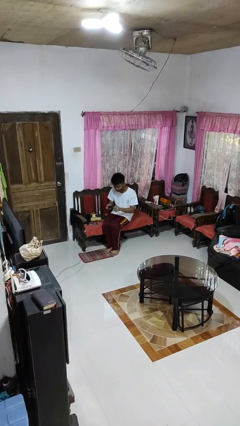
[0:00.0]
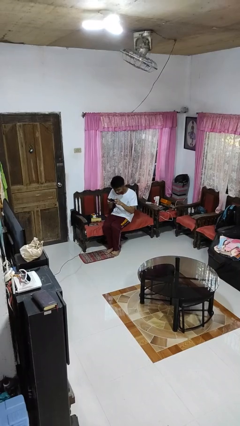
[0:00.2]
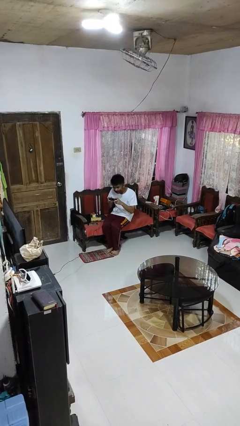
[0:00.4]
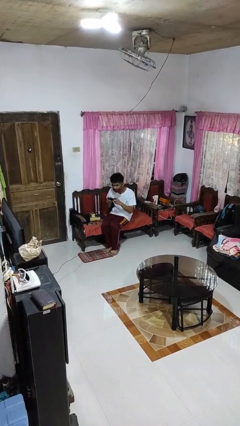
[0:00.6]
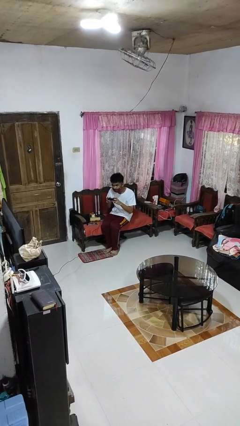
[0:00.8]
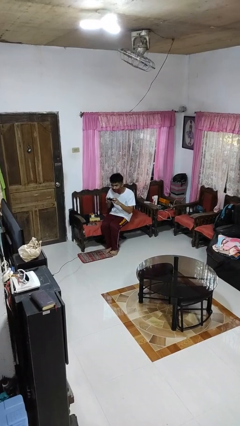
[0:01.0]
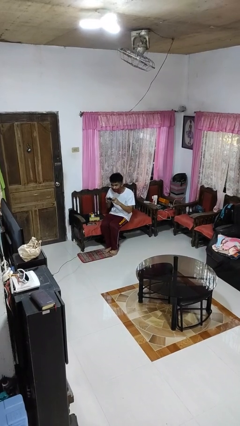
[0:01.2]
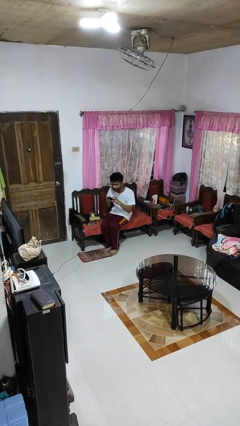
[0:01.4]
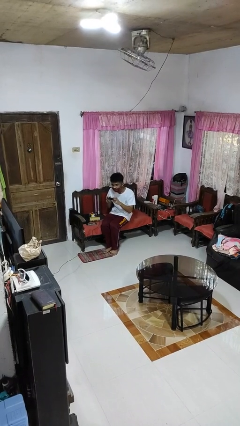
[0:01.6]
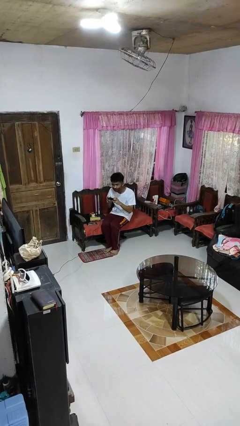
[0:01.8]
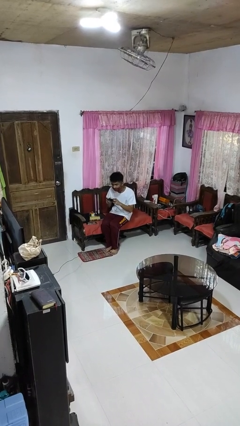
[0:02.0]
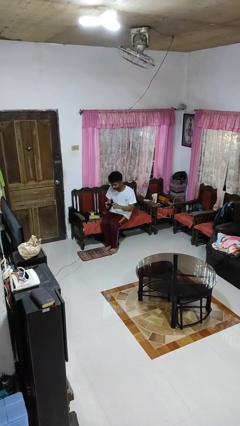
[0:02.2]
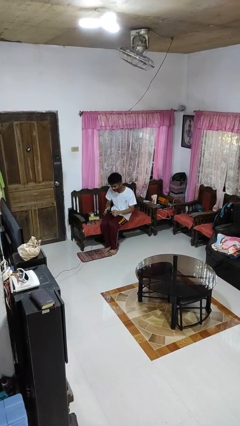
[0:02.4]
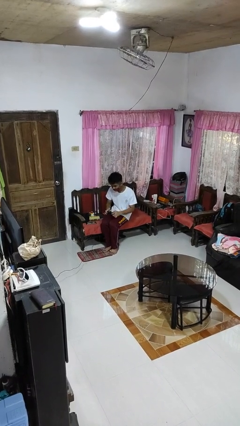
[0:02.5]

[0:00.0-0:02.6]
person interacts with handheld game

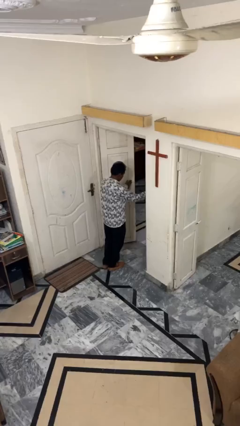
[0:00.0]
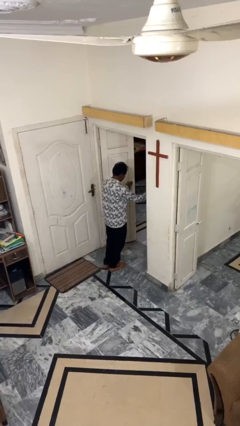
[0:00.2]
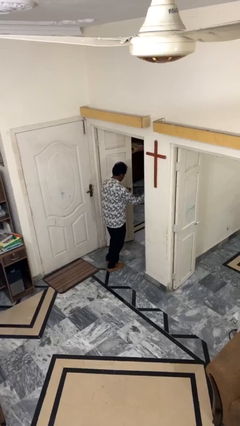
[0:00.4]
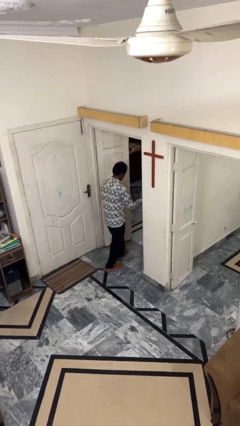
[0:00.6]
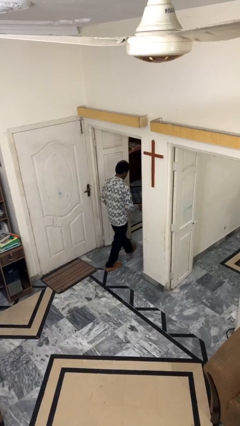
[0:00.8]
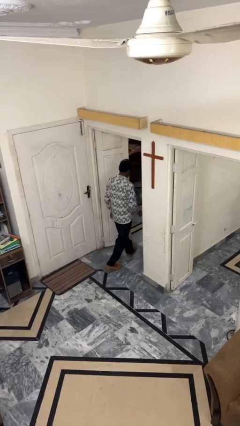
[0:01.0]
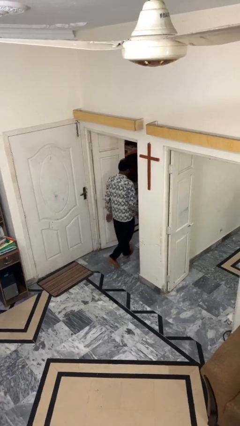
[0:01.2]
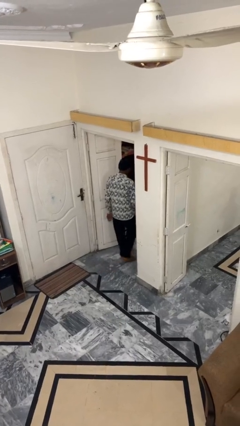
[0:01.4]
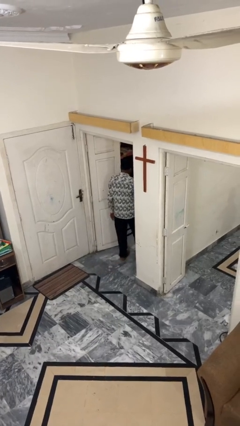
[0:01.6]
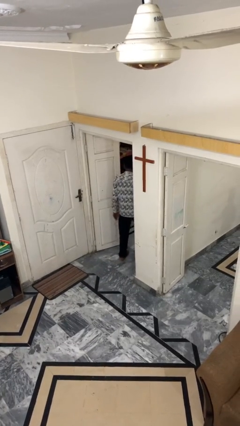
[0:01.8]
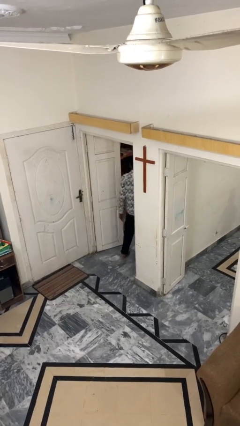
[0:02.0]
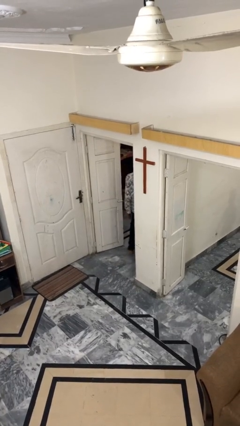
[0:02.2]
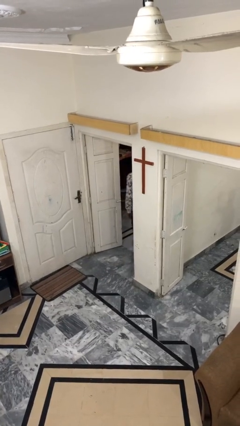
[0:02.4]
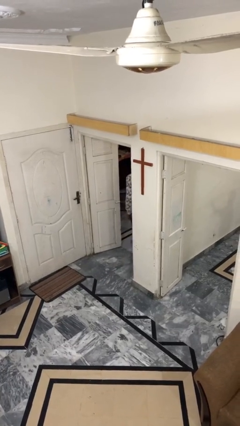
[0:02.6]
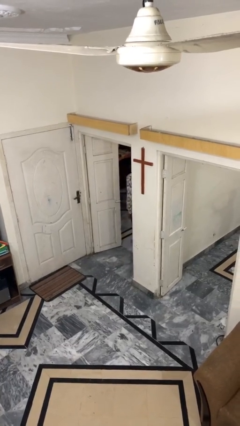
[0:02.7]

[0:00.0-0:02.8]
person exits scene through structure

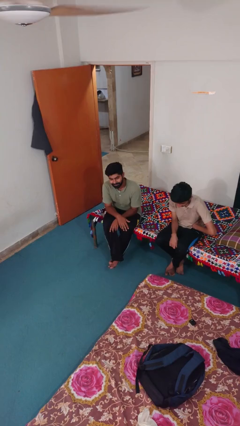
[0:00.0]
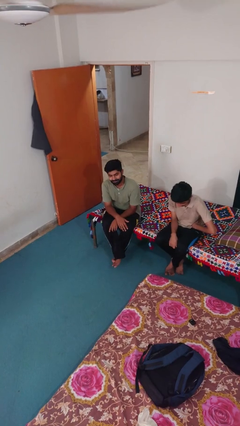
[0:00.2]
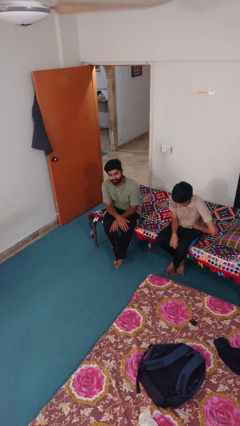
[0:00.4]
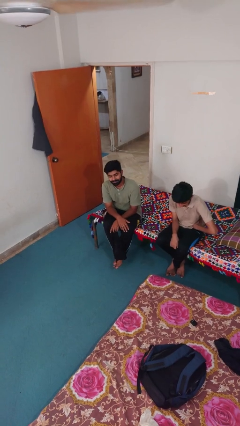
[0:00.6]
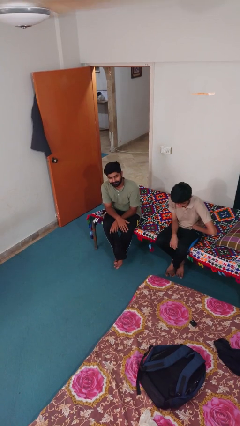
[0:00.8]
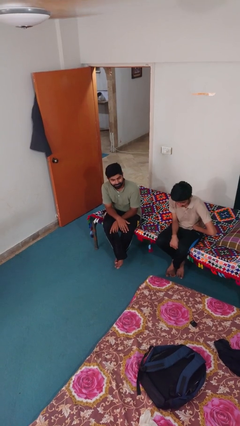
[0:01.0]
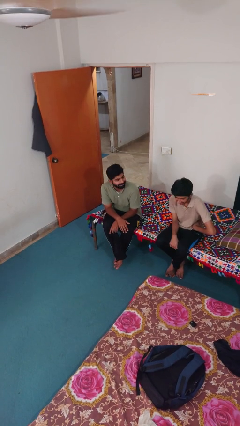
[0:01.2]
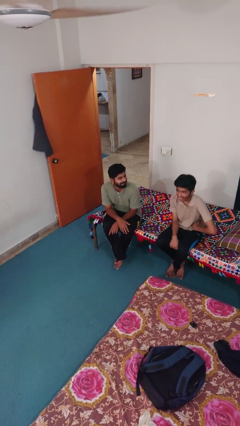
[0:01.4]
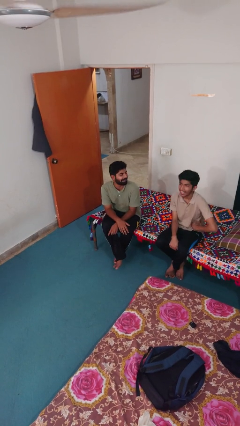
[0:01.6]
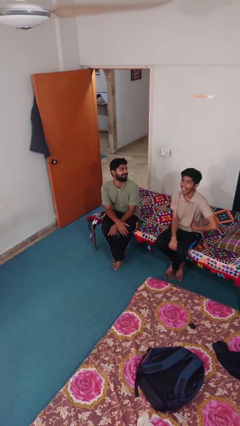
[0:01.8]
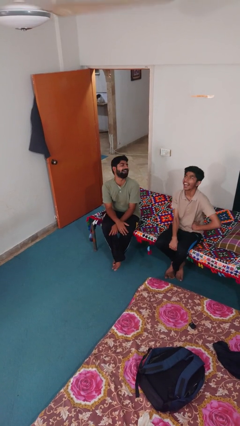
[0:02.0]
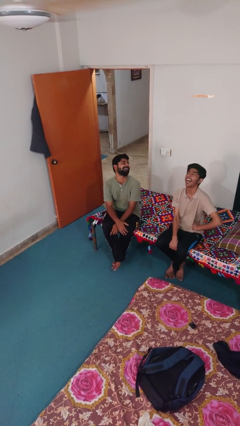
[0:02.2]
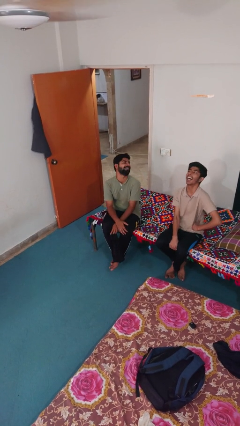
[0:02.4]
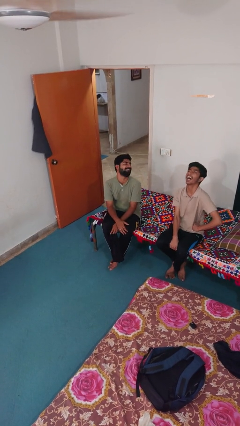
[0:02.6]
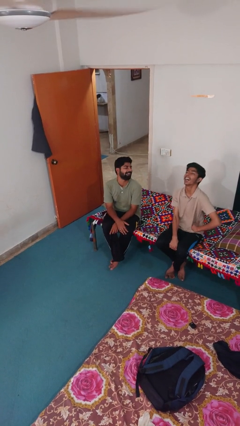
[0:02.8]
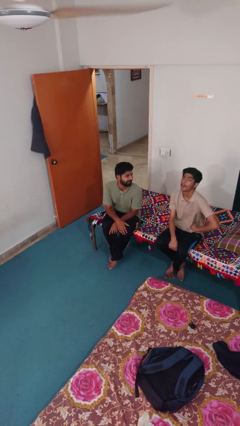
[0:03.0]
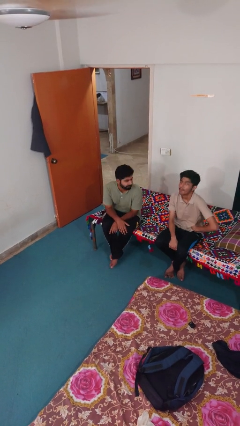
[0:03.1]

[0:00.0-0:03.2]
person laughs with person

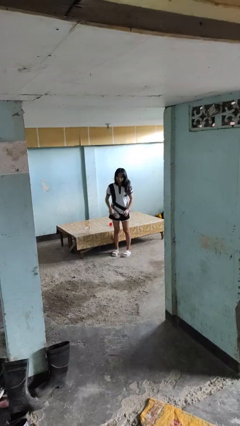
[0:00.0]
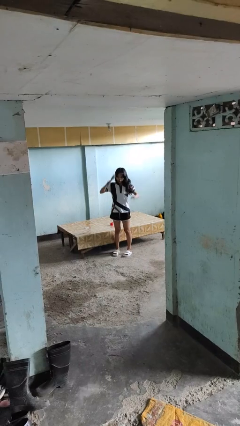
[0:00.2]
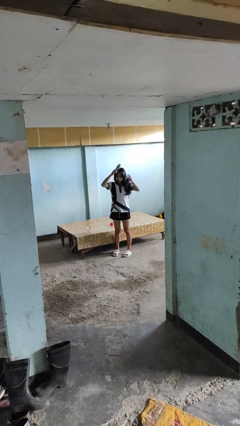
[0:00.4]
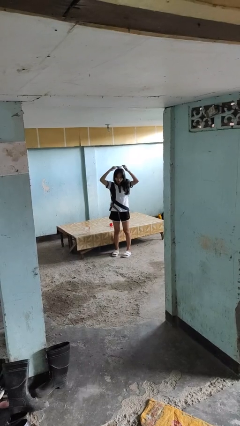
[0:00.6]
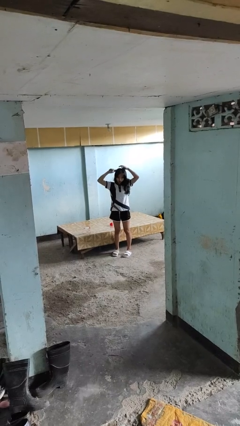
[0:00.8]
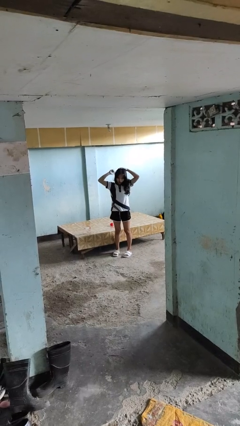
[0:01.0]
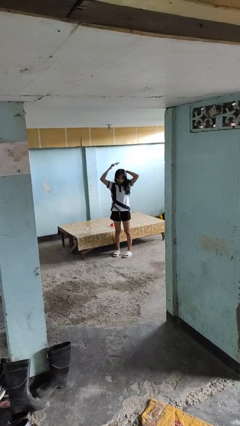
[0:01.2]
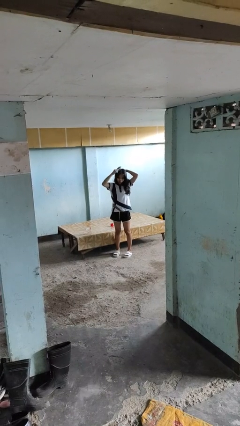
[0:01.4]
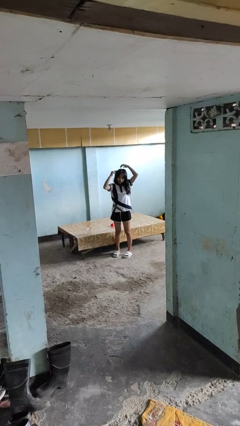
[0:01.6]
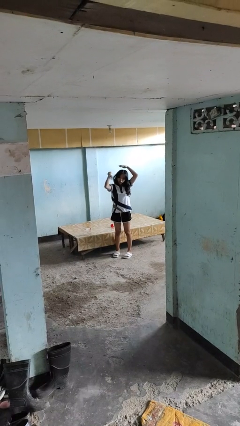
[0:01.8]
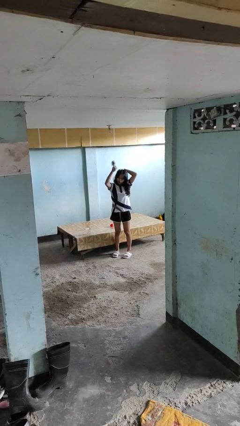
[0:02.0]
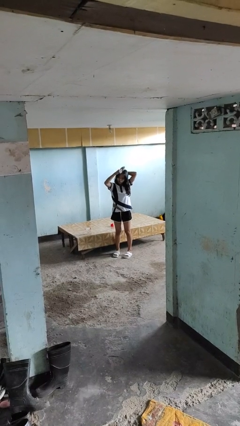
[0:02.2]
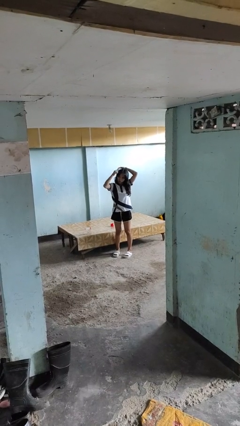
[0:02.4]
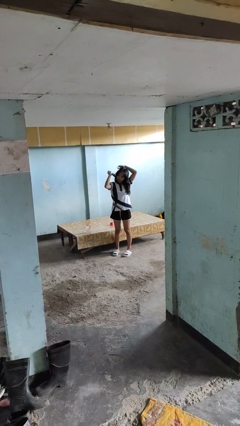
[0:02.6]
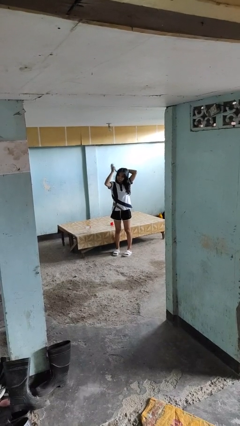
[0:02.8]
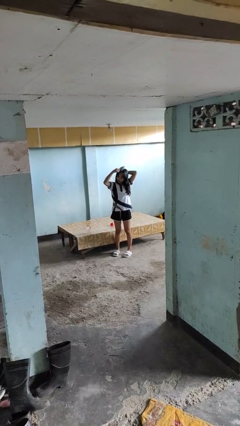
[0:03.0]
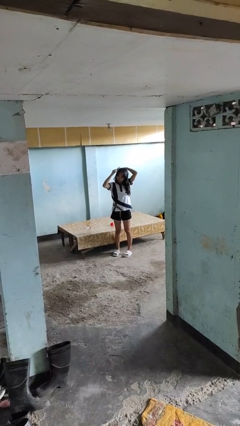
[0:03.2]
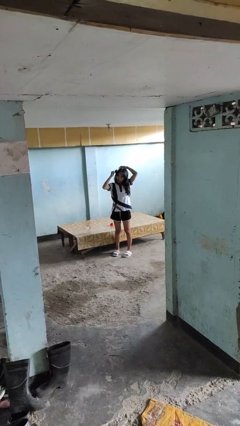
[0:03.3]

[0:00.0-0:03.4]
person brushes hair

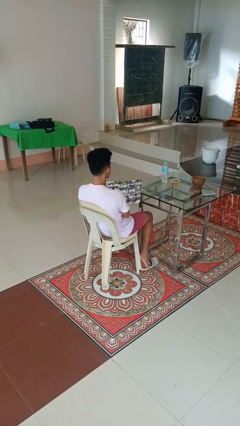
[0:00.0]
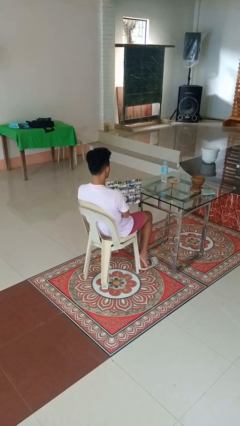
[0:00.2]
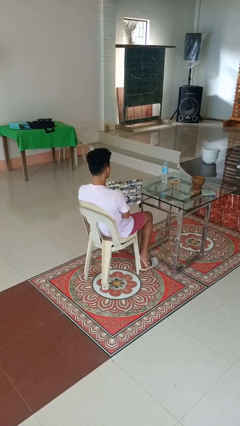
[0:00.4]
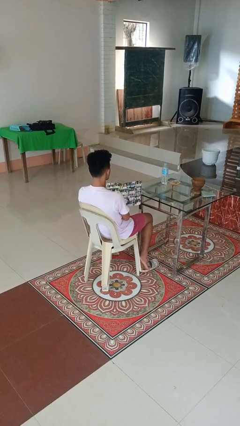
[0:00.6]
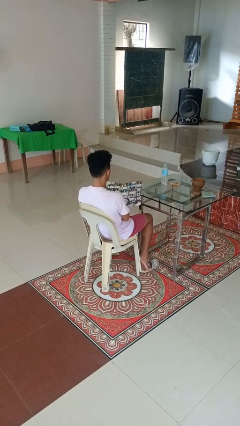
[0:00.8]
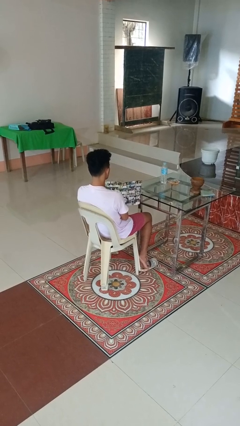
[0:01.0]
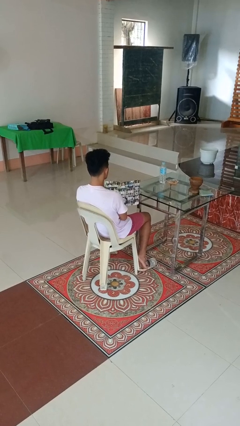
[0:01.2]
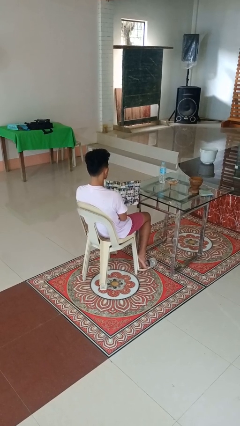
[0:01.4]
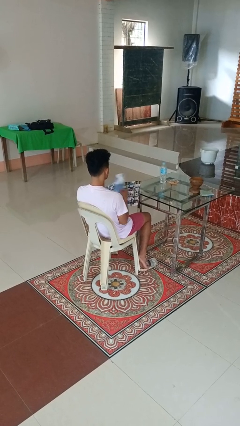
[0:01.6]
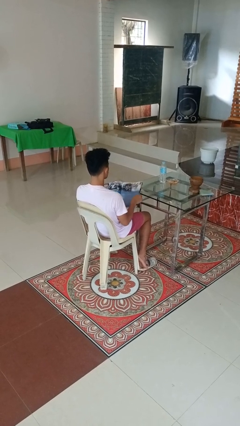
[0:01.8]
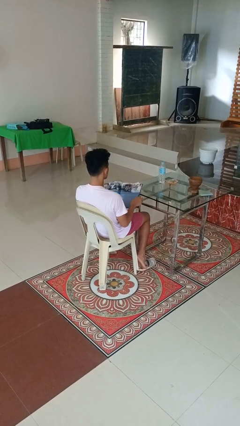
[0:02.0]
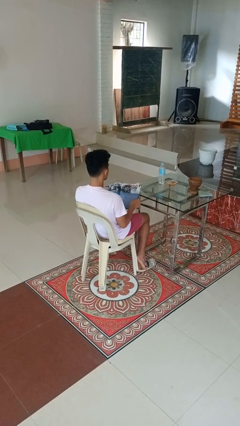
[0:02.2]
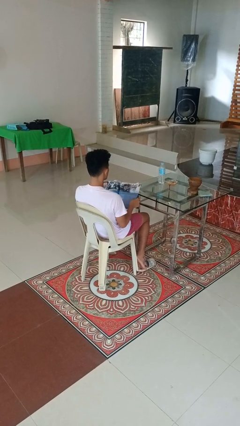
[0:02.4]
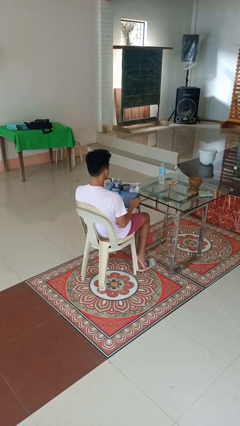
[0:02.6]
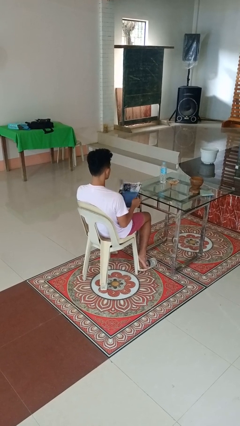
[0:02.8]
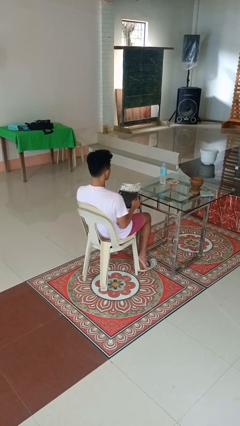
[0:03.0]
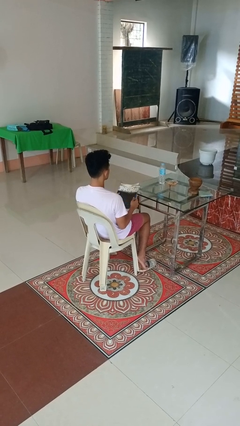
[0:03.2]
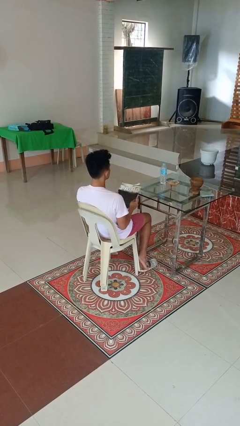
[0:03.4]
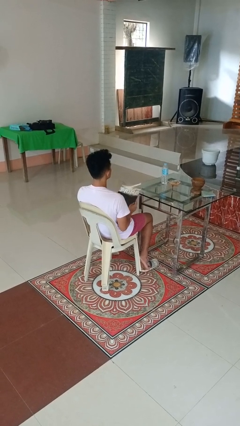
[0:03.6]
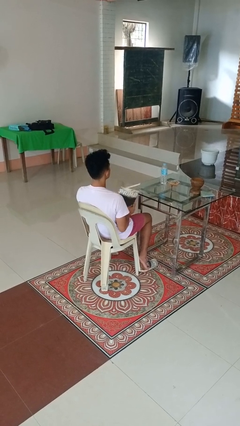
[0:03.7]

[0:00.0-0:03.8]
person reads magazine

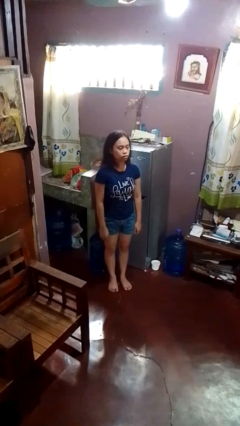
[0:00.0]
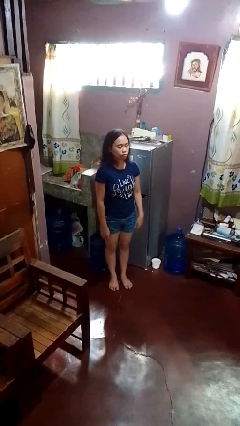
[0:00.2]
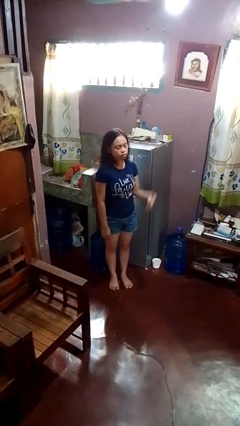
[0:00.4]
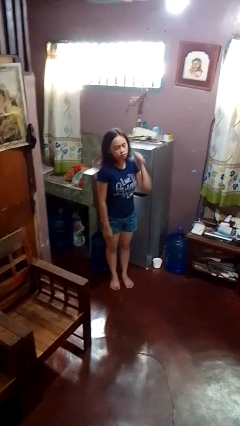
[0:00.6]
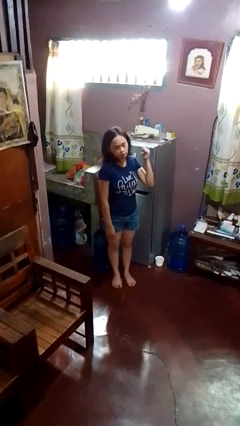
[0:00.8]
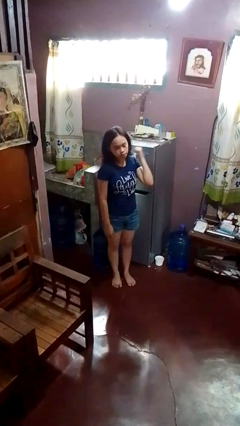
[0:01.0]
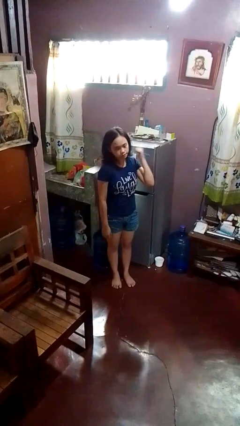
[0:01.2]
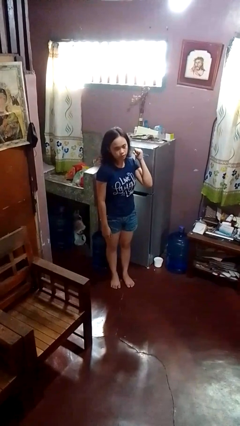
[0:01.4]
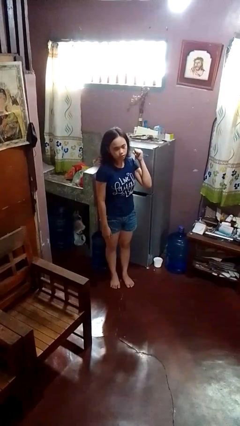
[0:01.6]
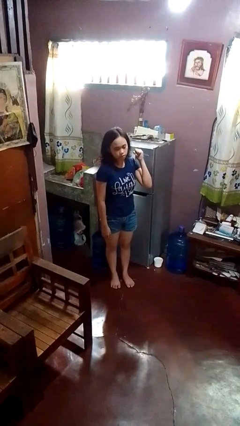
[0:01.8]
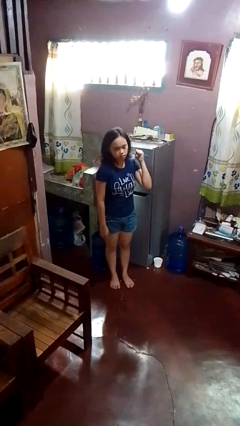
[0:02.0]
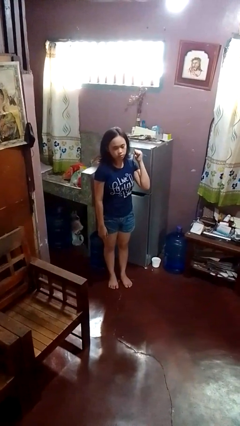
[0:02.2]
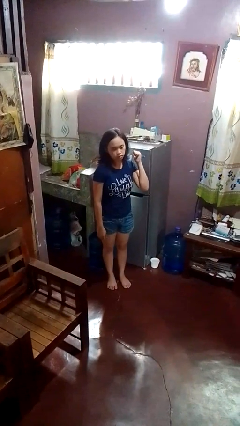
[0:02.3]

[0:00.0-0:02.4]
person gestures behind me
